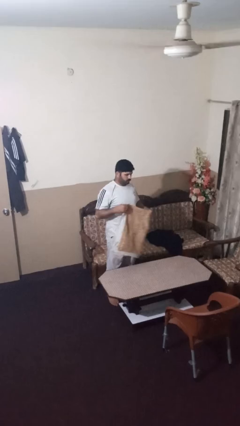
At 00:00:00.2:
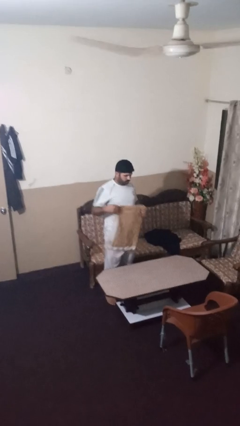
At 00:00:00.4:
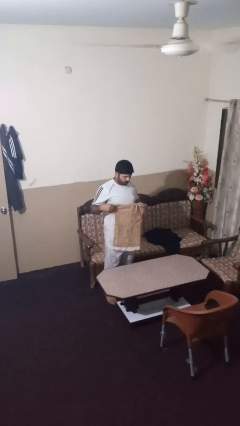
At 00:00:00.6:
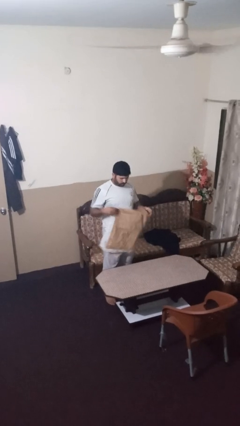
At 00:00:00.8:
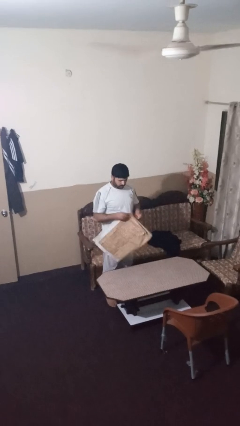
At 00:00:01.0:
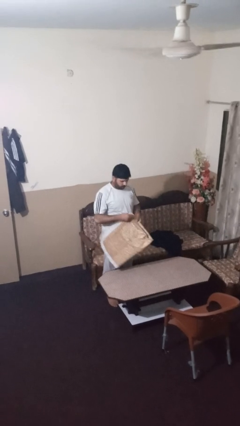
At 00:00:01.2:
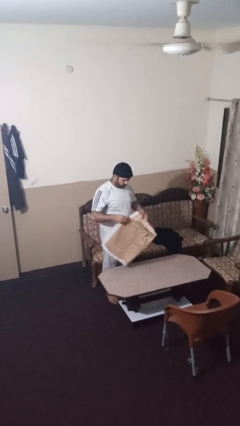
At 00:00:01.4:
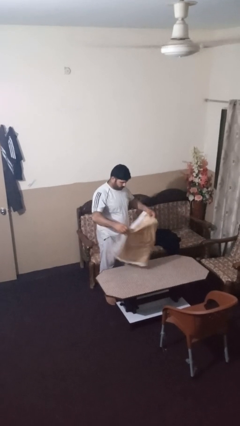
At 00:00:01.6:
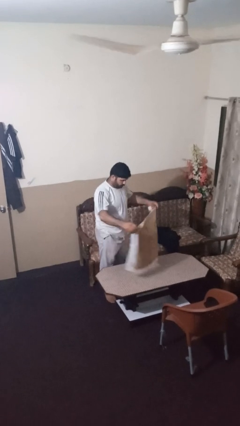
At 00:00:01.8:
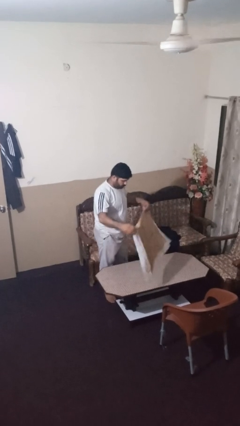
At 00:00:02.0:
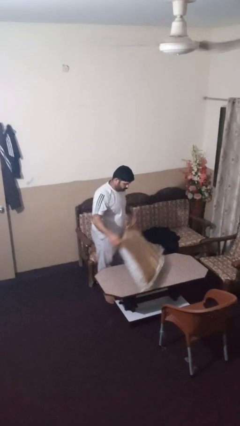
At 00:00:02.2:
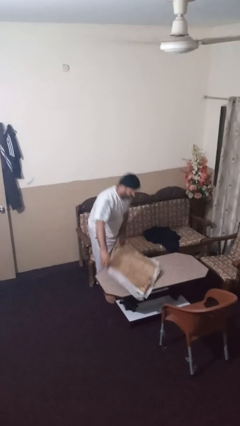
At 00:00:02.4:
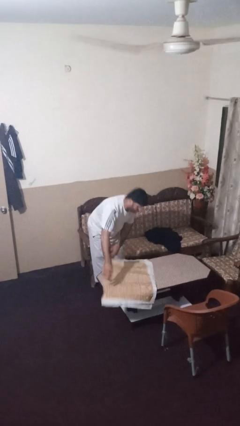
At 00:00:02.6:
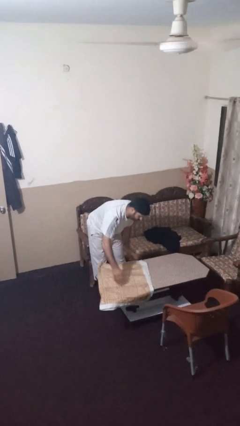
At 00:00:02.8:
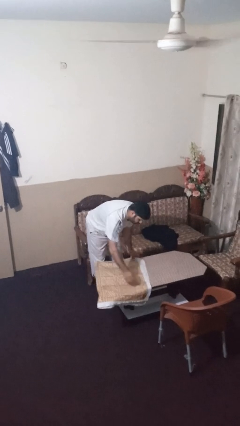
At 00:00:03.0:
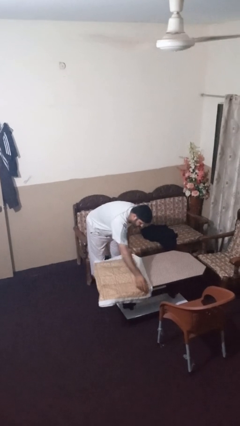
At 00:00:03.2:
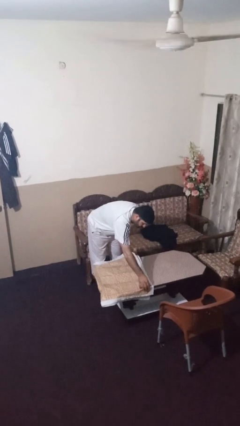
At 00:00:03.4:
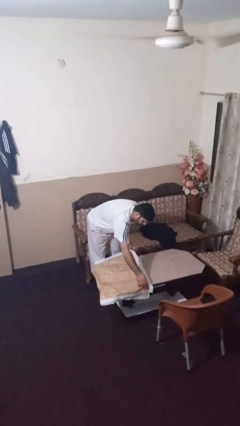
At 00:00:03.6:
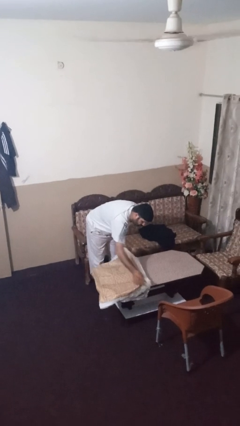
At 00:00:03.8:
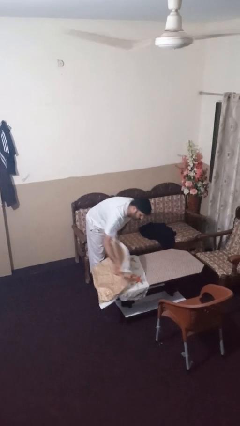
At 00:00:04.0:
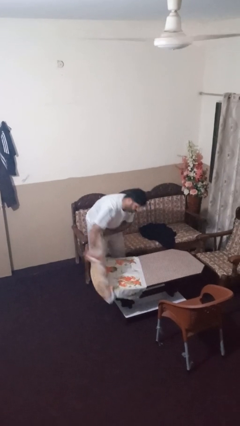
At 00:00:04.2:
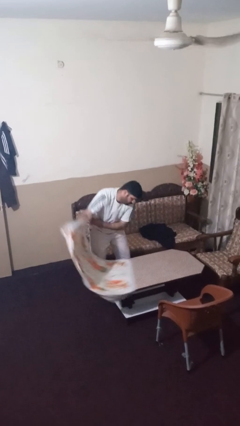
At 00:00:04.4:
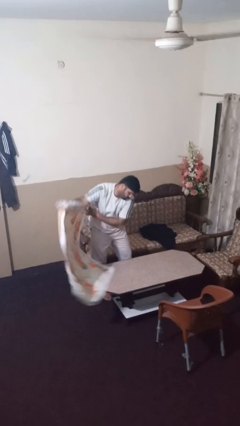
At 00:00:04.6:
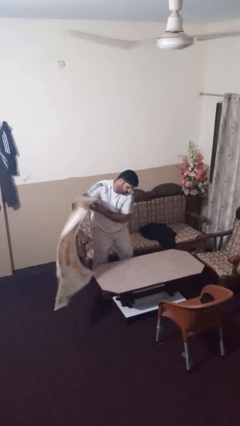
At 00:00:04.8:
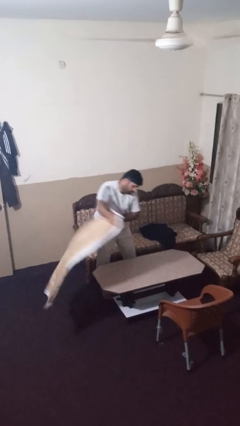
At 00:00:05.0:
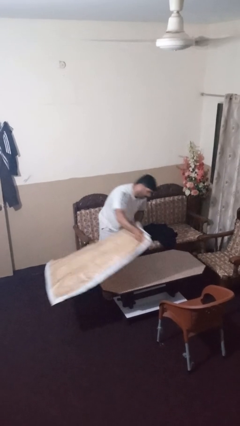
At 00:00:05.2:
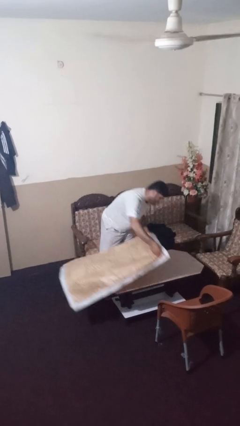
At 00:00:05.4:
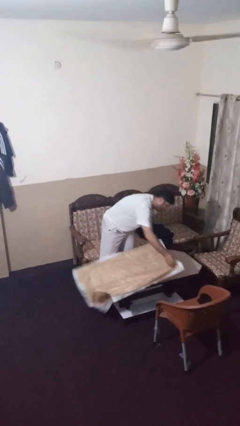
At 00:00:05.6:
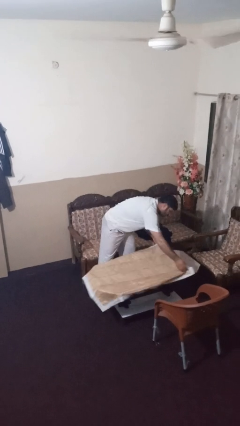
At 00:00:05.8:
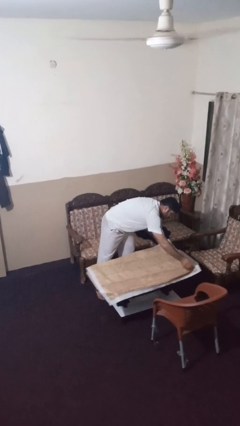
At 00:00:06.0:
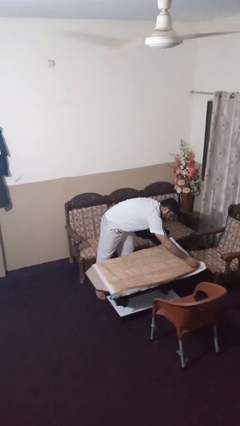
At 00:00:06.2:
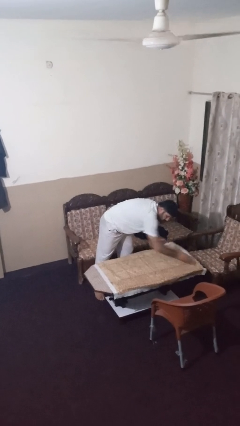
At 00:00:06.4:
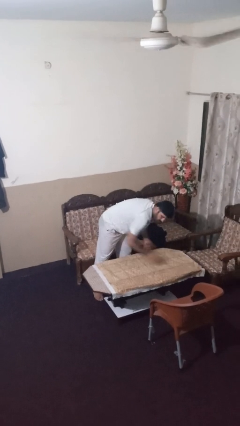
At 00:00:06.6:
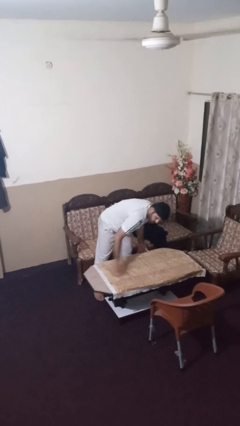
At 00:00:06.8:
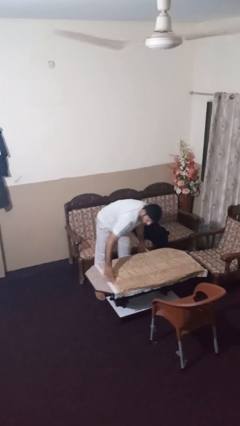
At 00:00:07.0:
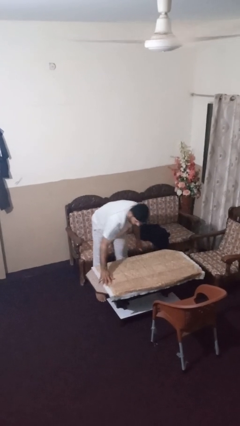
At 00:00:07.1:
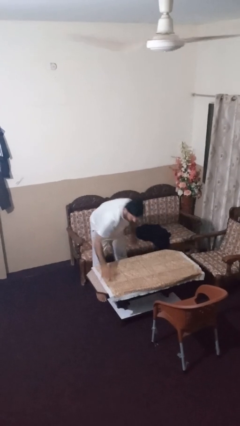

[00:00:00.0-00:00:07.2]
person spreads tablecloth

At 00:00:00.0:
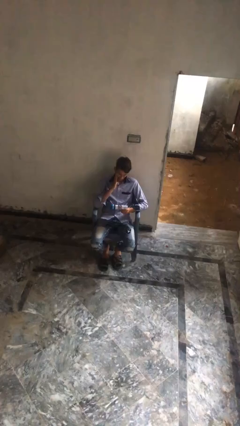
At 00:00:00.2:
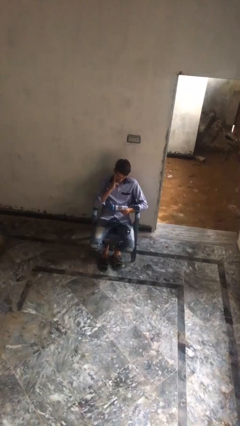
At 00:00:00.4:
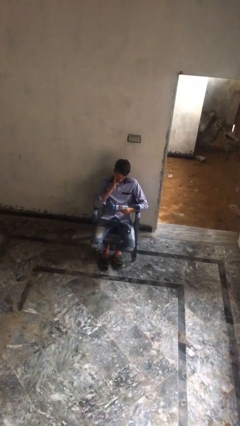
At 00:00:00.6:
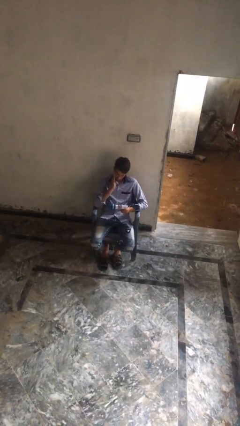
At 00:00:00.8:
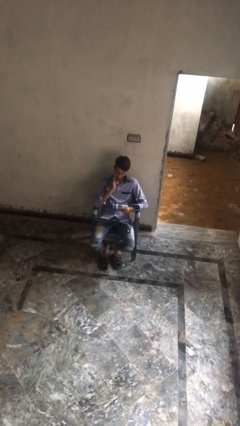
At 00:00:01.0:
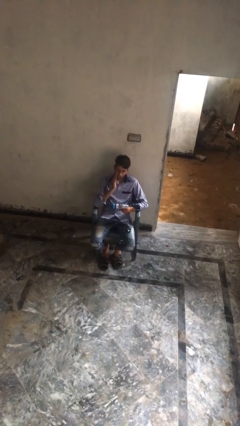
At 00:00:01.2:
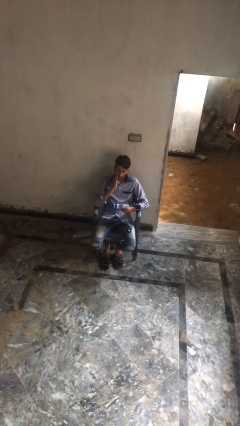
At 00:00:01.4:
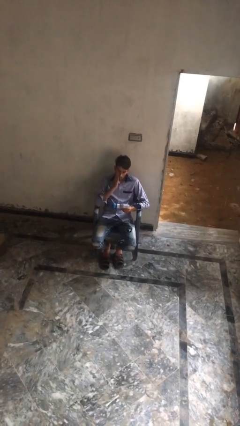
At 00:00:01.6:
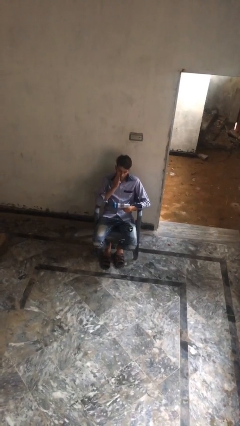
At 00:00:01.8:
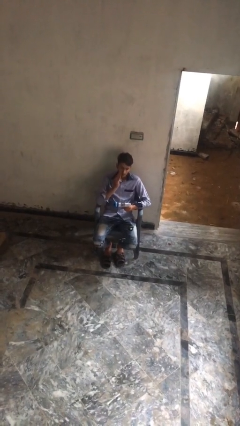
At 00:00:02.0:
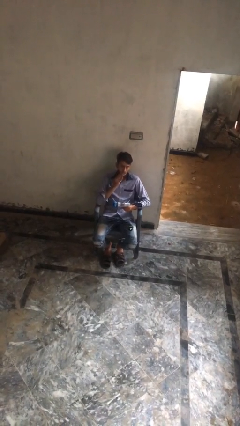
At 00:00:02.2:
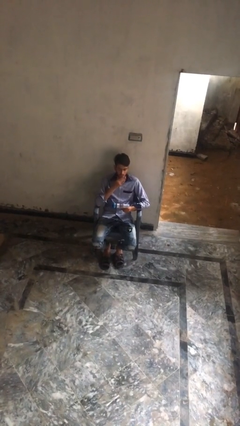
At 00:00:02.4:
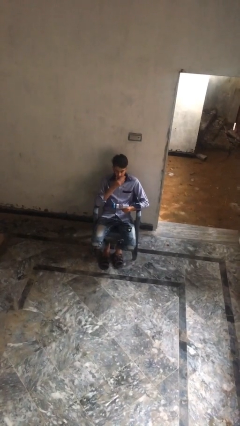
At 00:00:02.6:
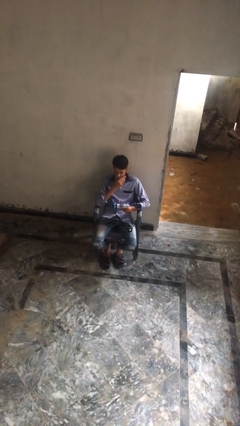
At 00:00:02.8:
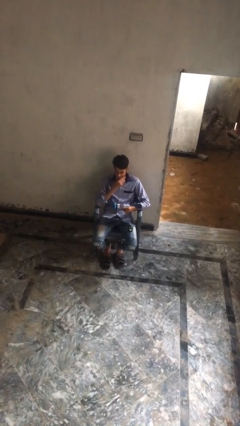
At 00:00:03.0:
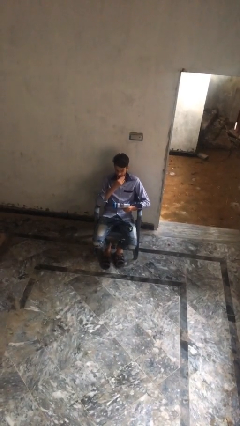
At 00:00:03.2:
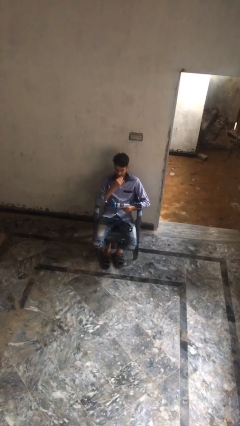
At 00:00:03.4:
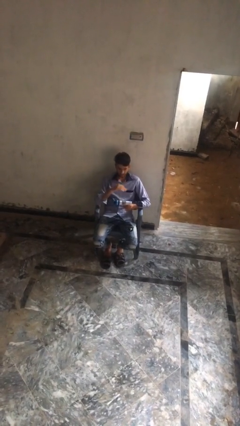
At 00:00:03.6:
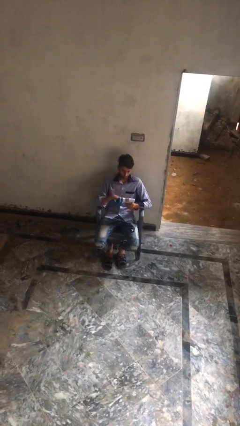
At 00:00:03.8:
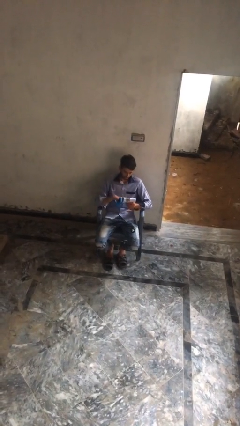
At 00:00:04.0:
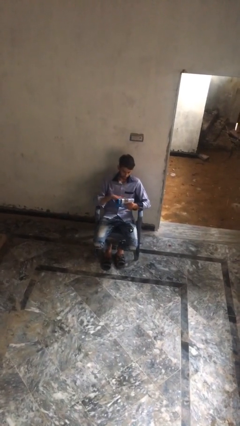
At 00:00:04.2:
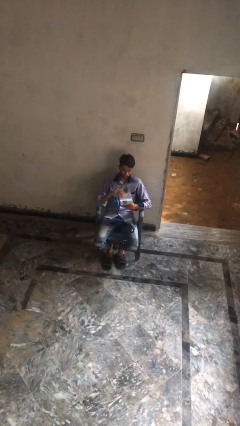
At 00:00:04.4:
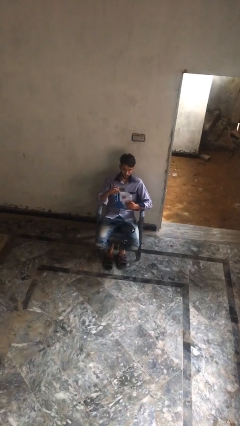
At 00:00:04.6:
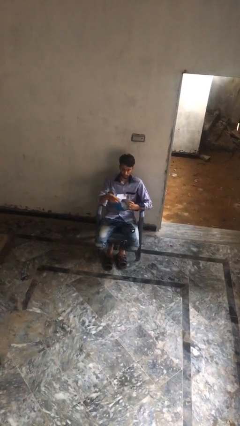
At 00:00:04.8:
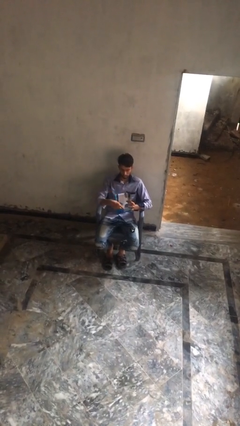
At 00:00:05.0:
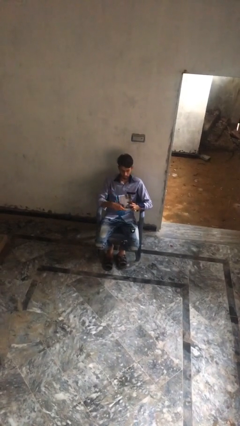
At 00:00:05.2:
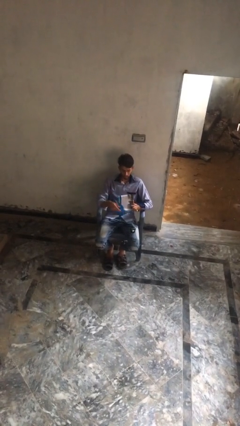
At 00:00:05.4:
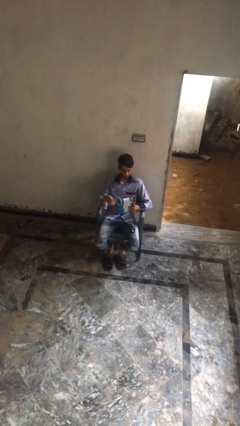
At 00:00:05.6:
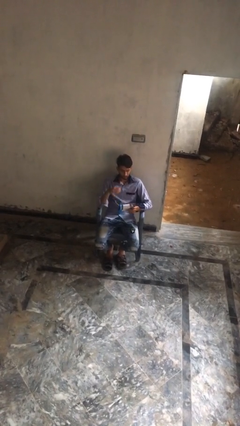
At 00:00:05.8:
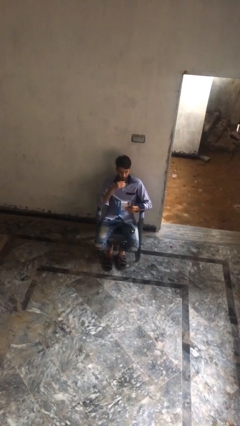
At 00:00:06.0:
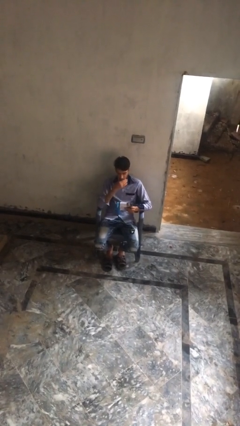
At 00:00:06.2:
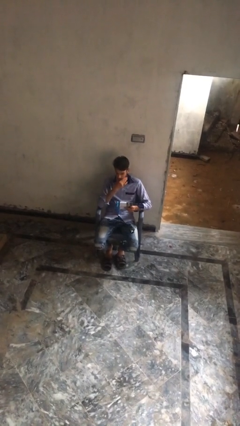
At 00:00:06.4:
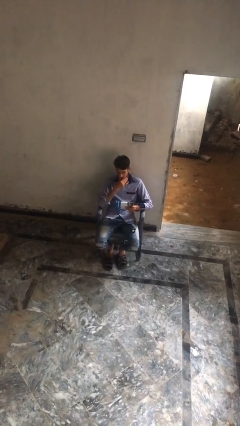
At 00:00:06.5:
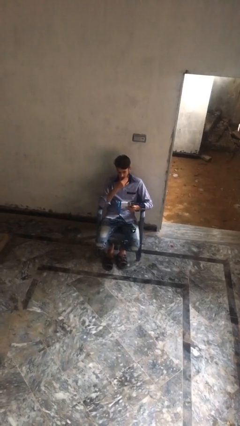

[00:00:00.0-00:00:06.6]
person reads document

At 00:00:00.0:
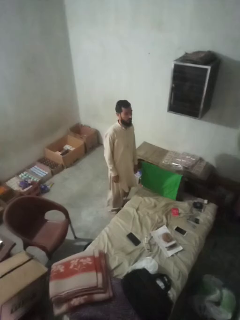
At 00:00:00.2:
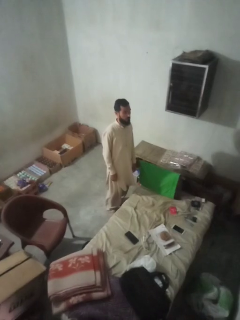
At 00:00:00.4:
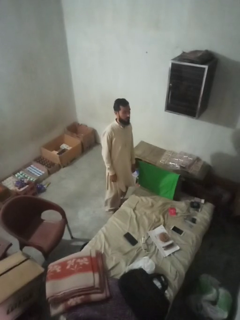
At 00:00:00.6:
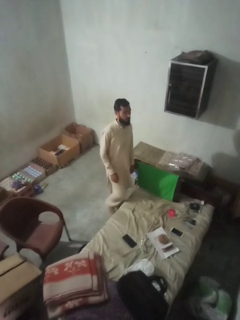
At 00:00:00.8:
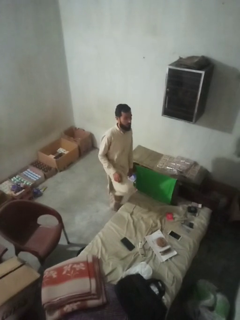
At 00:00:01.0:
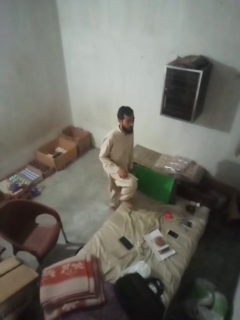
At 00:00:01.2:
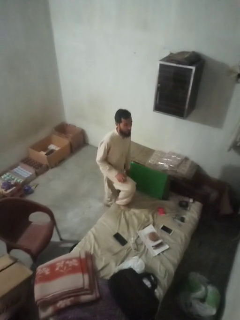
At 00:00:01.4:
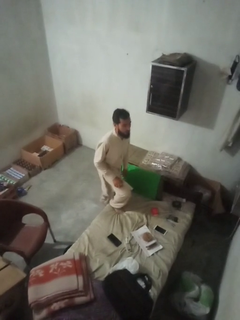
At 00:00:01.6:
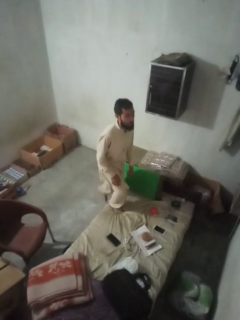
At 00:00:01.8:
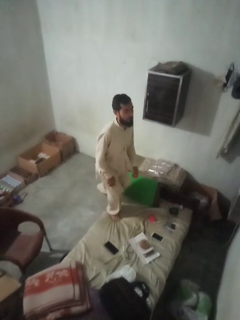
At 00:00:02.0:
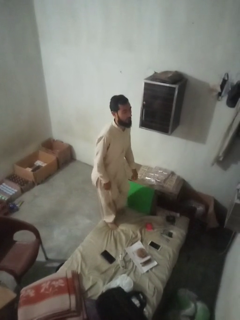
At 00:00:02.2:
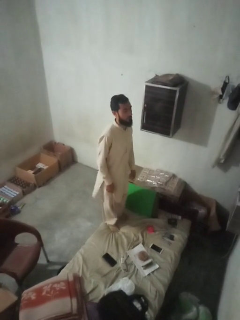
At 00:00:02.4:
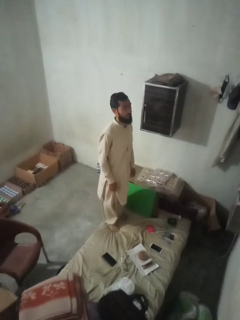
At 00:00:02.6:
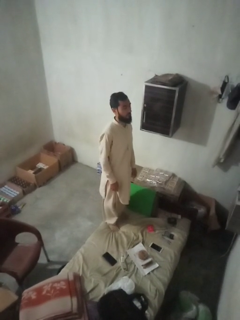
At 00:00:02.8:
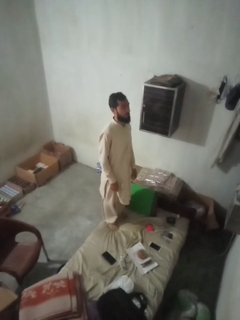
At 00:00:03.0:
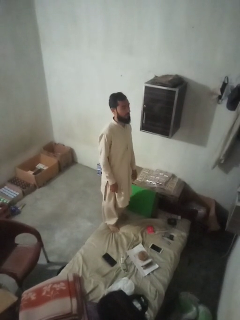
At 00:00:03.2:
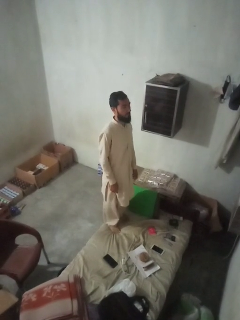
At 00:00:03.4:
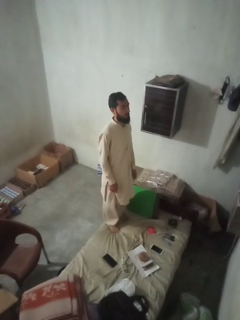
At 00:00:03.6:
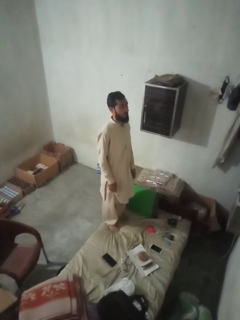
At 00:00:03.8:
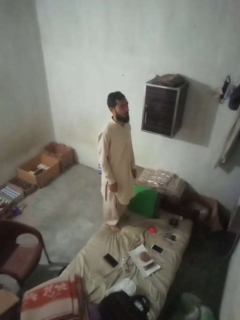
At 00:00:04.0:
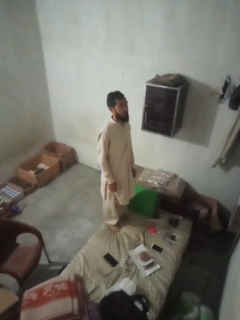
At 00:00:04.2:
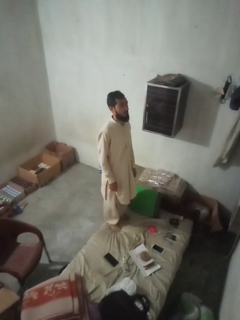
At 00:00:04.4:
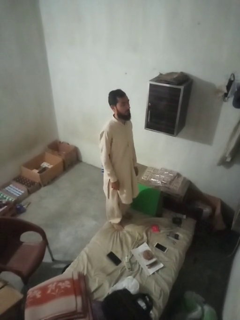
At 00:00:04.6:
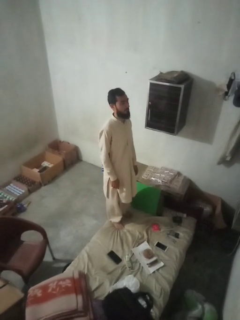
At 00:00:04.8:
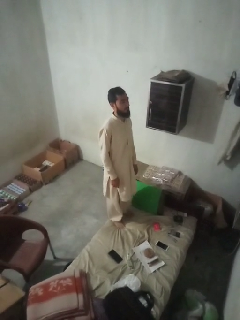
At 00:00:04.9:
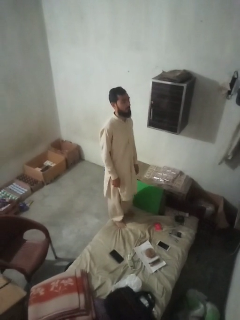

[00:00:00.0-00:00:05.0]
person climbs on couch
